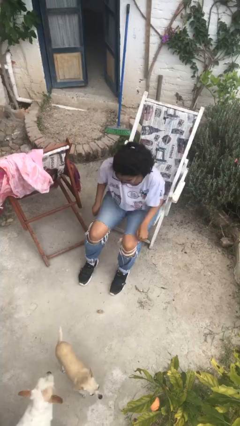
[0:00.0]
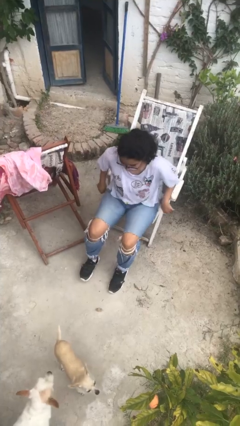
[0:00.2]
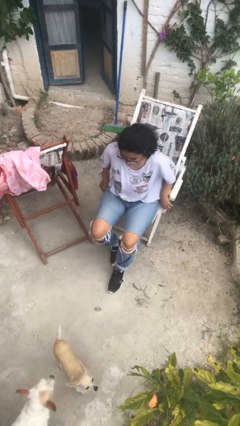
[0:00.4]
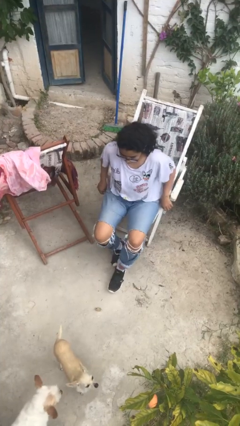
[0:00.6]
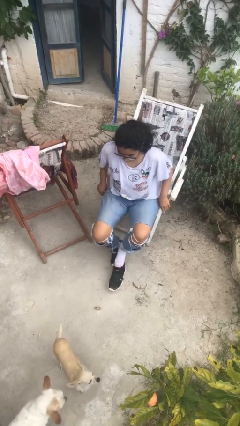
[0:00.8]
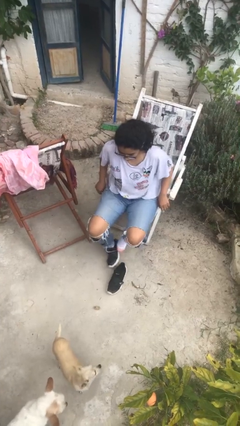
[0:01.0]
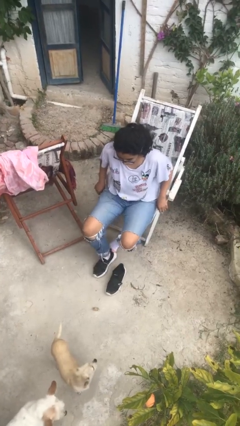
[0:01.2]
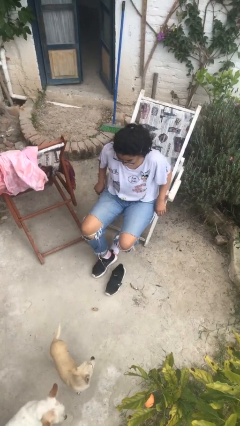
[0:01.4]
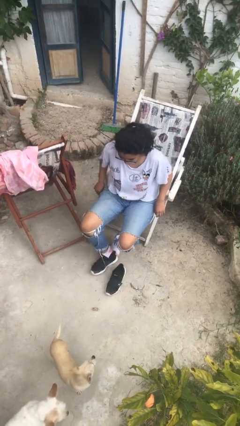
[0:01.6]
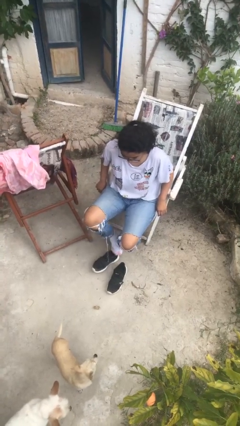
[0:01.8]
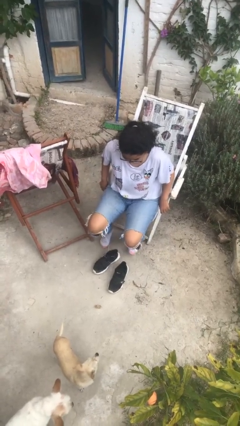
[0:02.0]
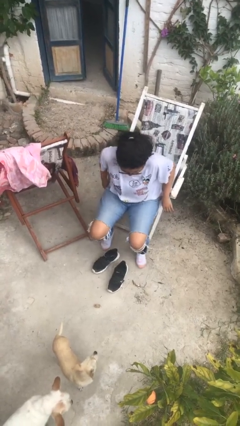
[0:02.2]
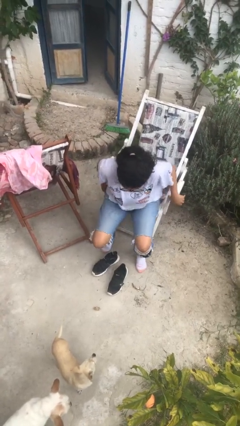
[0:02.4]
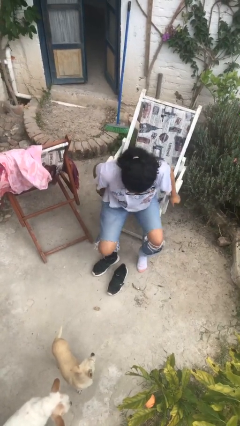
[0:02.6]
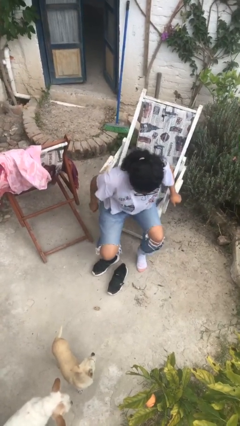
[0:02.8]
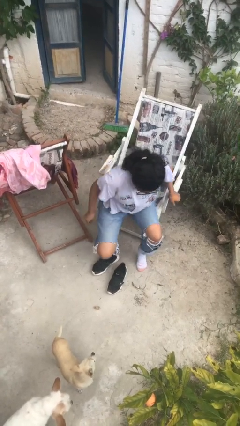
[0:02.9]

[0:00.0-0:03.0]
person takes off shoes

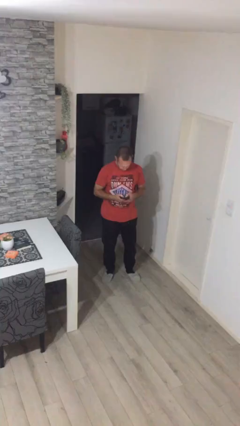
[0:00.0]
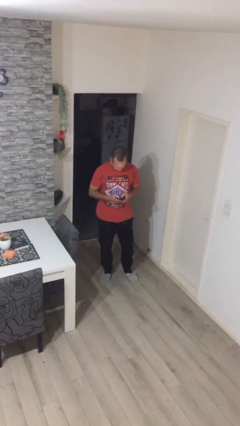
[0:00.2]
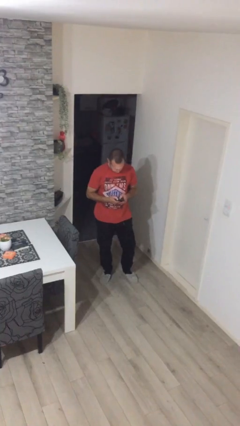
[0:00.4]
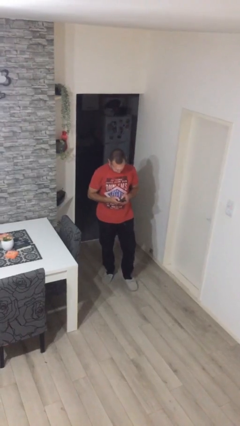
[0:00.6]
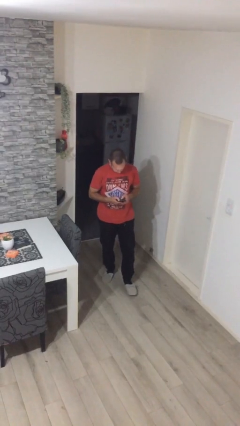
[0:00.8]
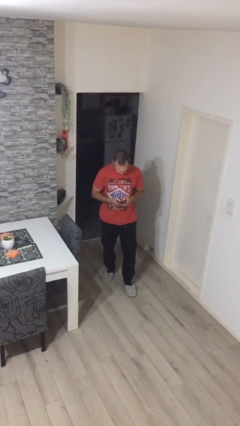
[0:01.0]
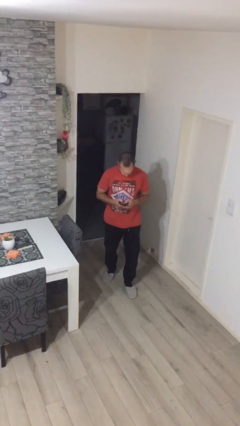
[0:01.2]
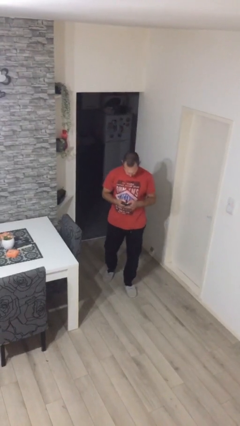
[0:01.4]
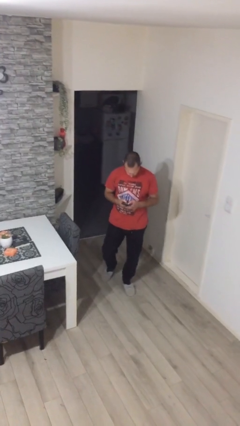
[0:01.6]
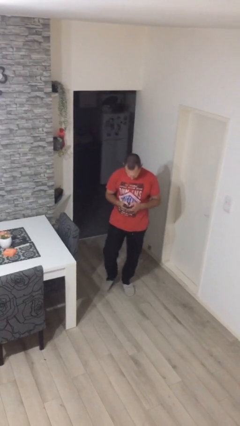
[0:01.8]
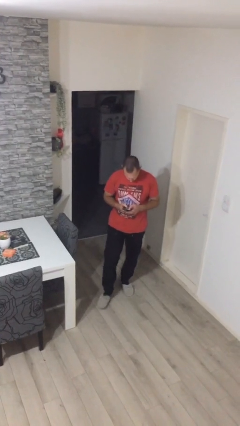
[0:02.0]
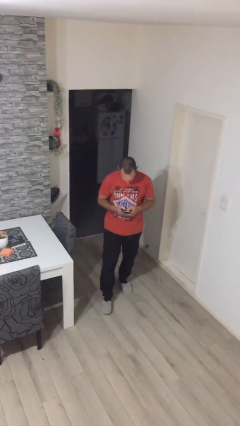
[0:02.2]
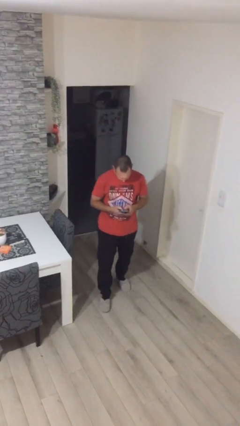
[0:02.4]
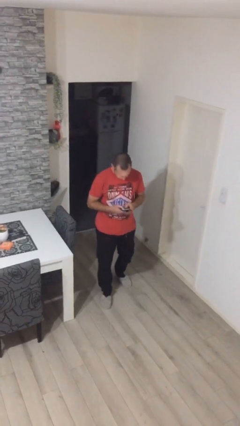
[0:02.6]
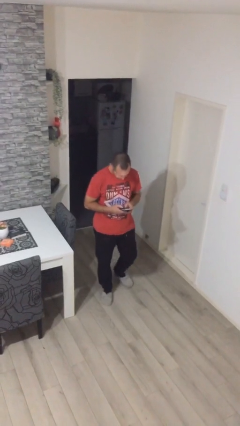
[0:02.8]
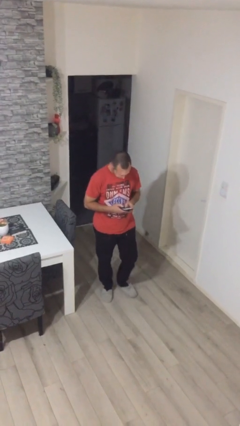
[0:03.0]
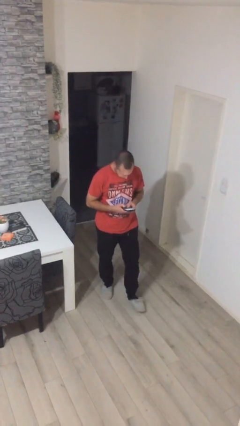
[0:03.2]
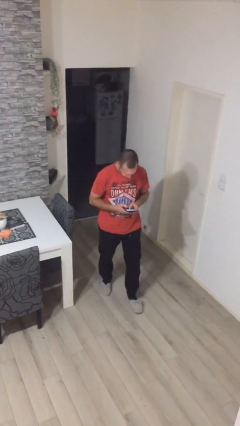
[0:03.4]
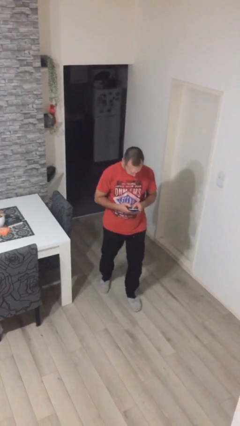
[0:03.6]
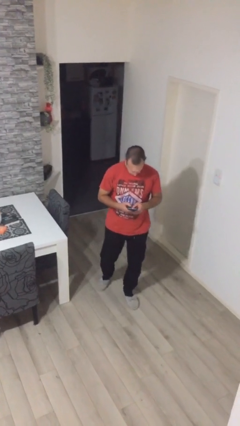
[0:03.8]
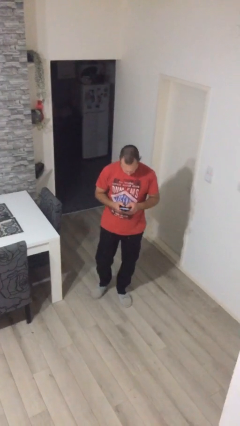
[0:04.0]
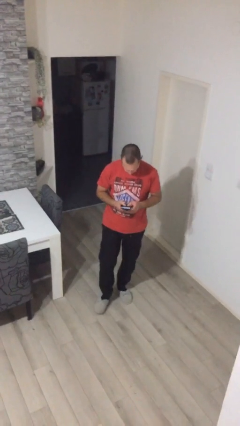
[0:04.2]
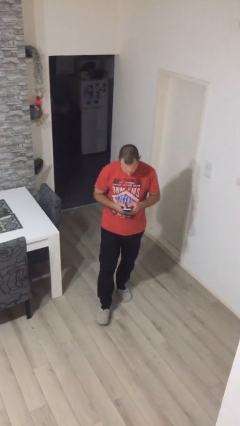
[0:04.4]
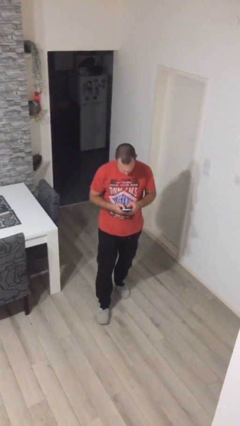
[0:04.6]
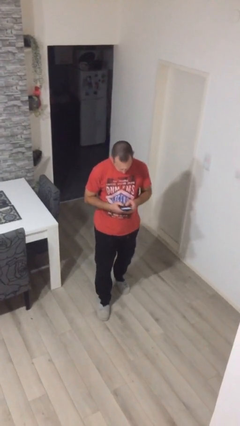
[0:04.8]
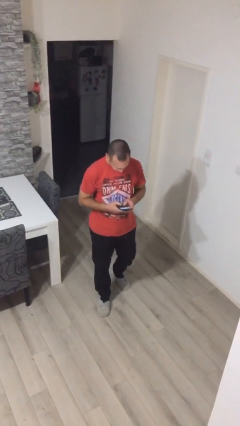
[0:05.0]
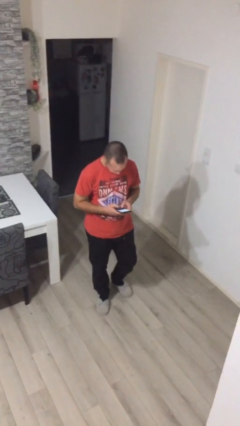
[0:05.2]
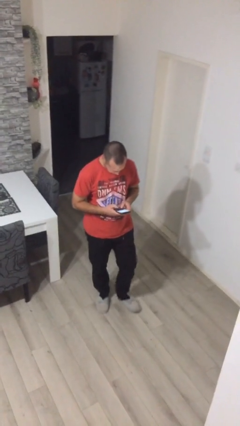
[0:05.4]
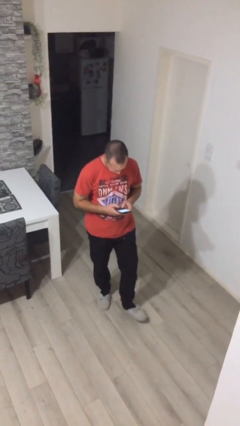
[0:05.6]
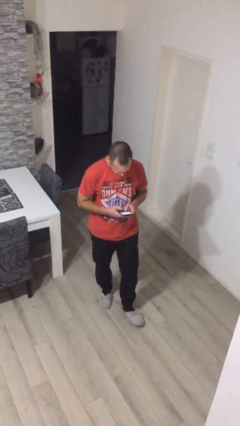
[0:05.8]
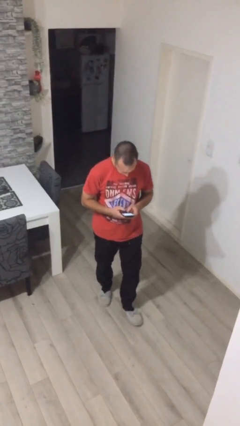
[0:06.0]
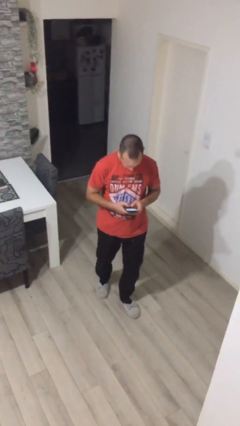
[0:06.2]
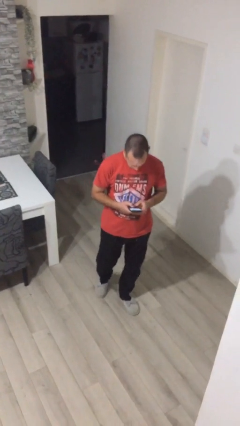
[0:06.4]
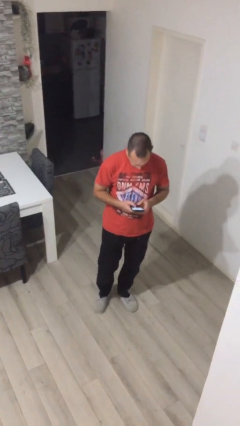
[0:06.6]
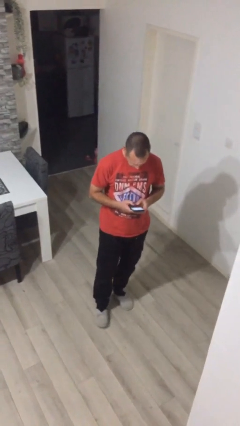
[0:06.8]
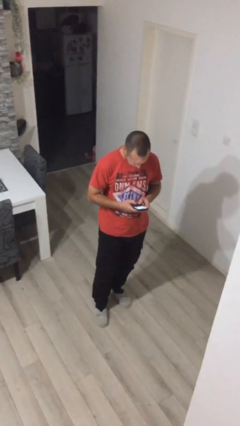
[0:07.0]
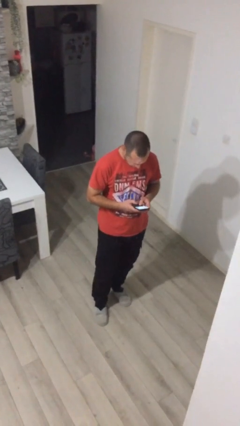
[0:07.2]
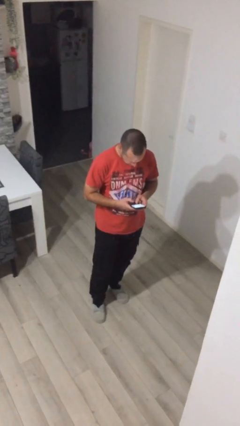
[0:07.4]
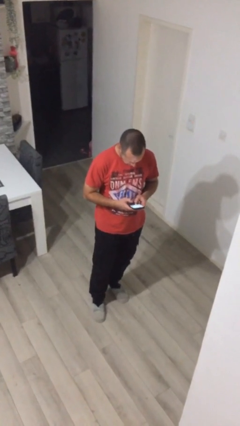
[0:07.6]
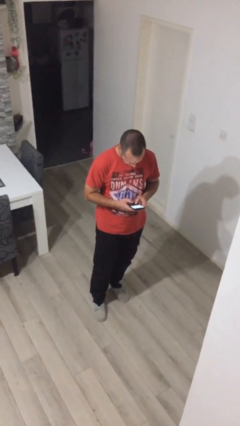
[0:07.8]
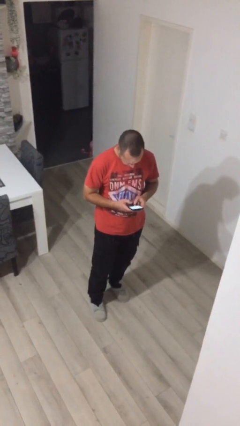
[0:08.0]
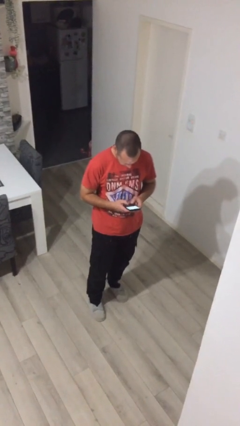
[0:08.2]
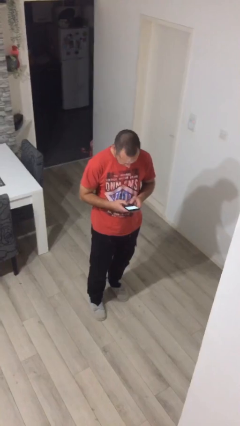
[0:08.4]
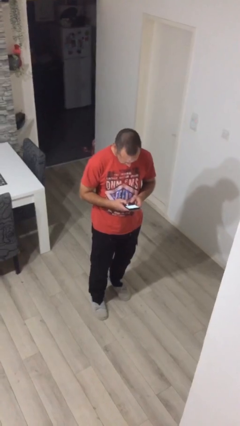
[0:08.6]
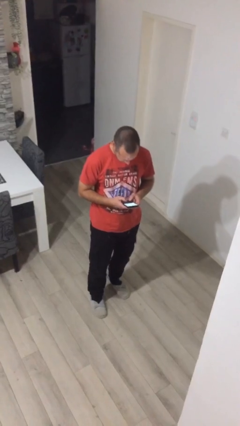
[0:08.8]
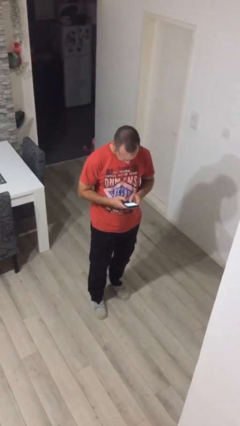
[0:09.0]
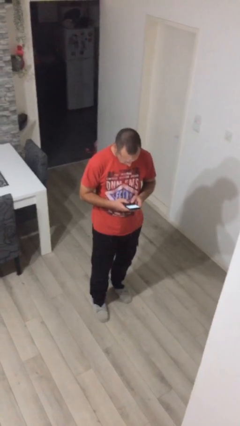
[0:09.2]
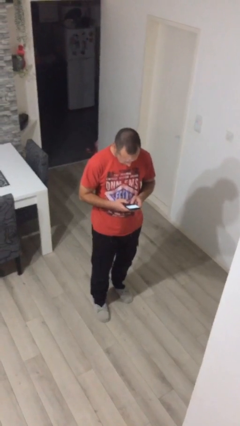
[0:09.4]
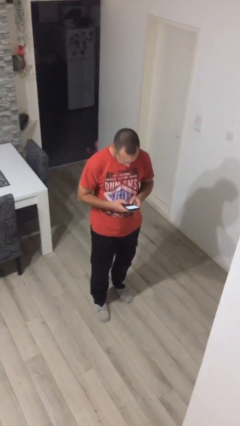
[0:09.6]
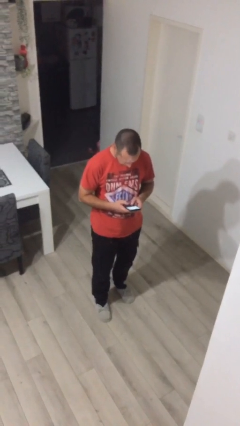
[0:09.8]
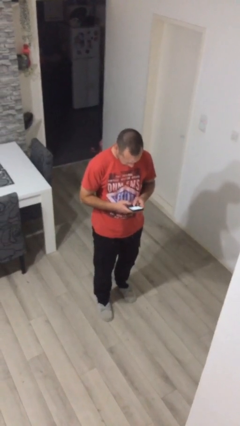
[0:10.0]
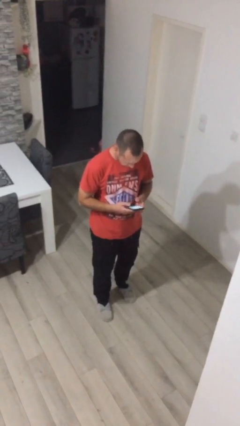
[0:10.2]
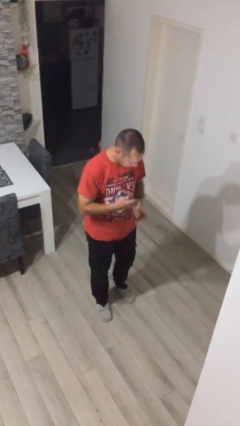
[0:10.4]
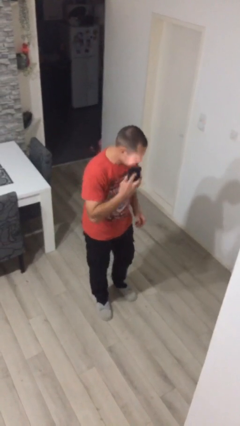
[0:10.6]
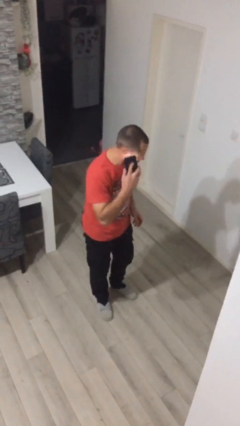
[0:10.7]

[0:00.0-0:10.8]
person texts on phone

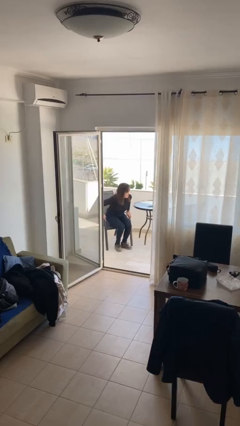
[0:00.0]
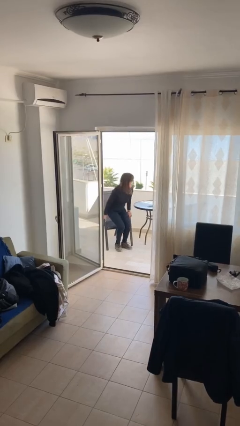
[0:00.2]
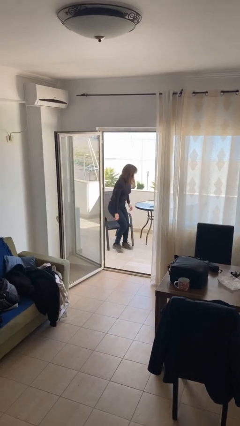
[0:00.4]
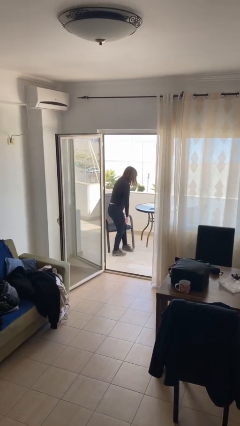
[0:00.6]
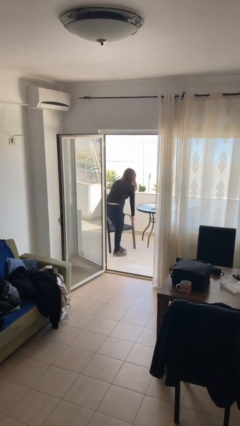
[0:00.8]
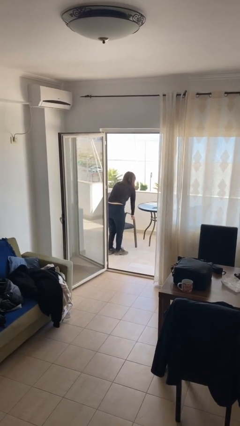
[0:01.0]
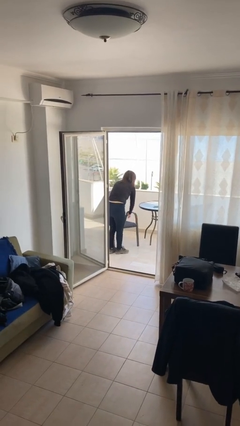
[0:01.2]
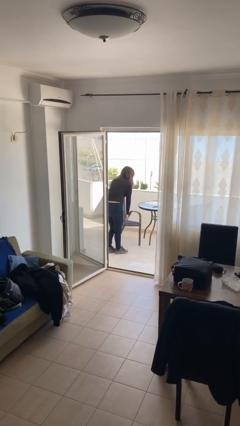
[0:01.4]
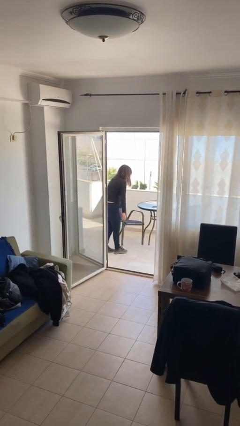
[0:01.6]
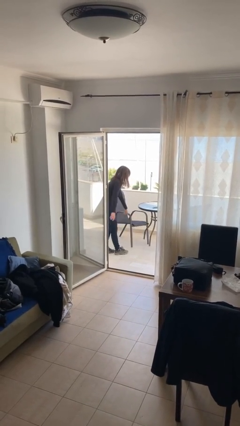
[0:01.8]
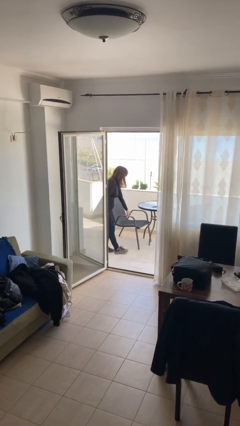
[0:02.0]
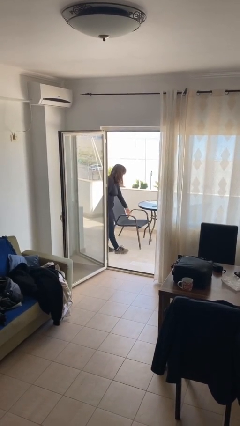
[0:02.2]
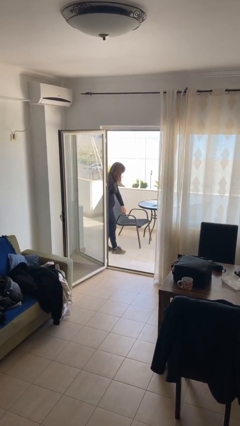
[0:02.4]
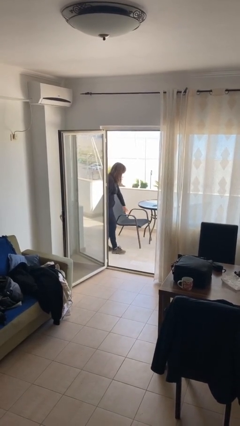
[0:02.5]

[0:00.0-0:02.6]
person stands up

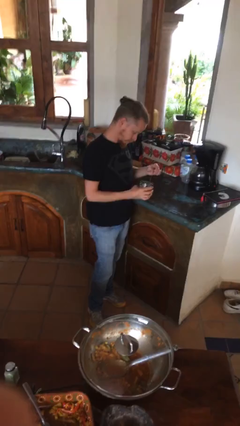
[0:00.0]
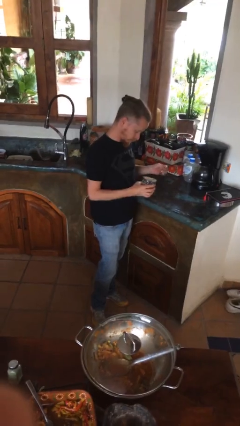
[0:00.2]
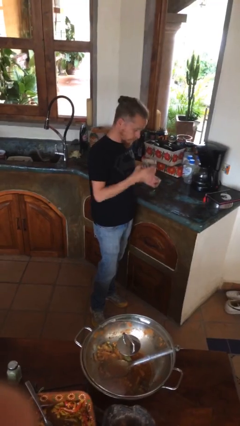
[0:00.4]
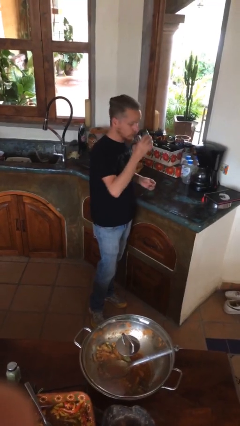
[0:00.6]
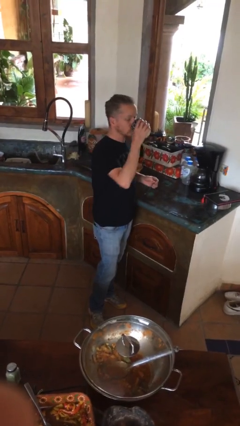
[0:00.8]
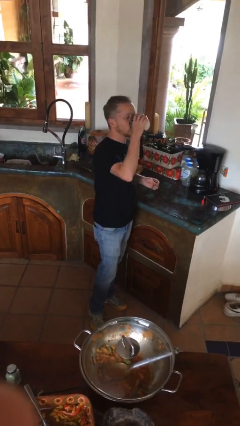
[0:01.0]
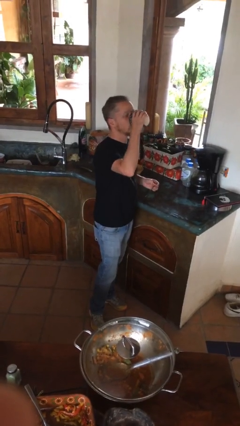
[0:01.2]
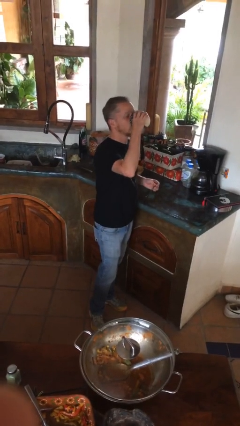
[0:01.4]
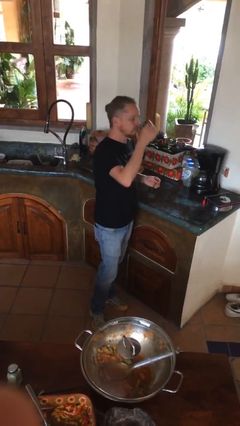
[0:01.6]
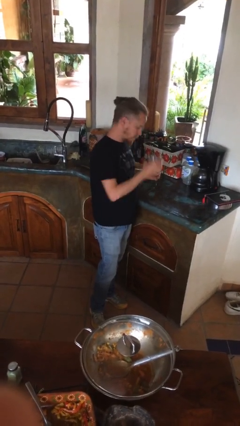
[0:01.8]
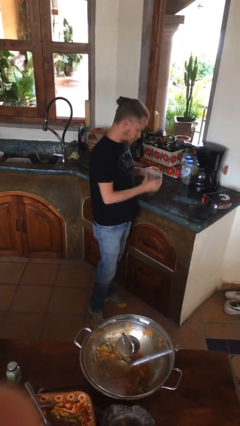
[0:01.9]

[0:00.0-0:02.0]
person drinks from mug
